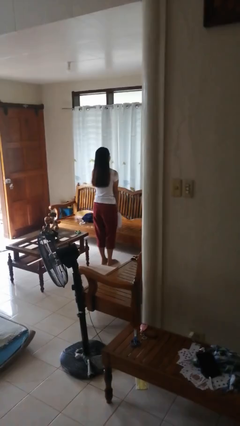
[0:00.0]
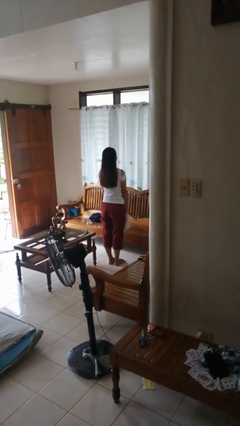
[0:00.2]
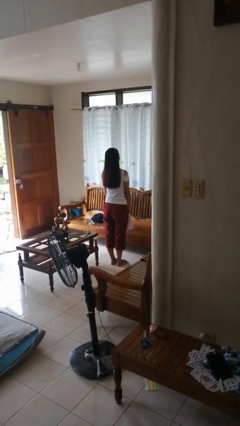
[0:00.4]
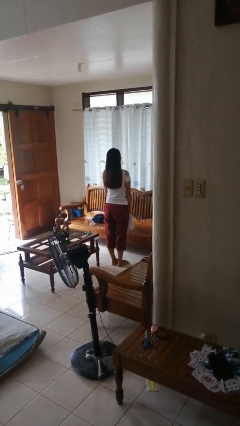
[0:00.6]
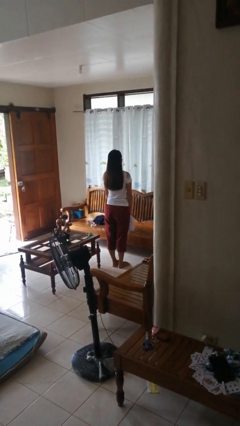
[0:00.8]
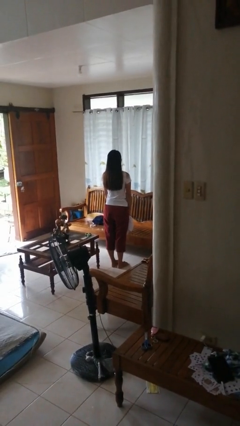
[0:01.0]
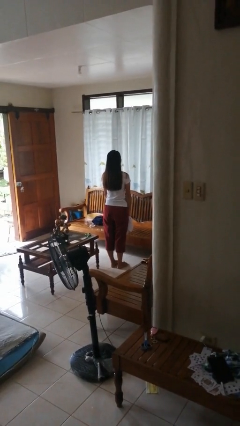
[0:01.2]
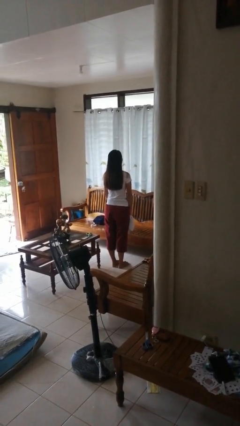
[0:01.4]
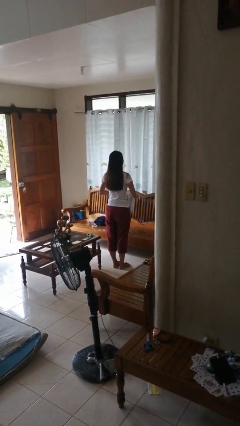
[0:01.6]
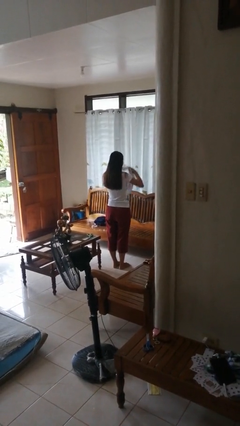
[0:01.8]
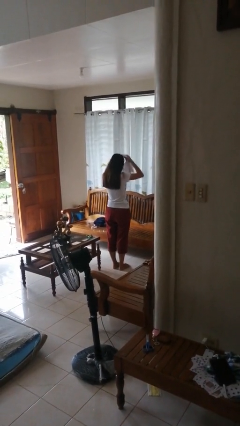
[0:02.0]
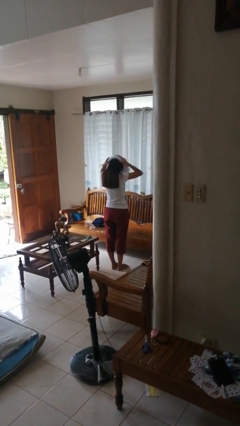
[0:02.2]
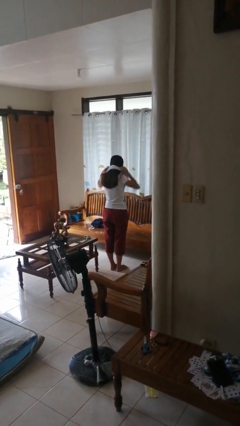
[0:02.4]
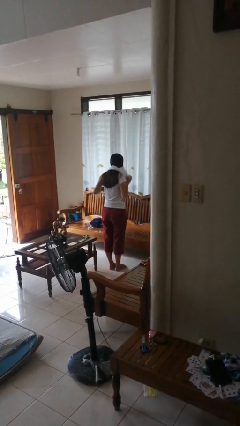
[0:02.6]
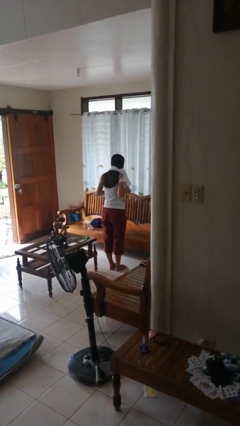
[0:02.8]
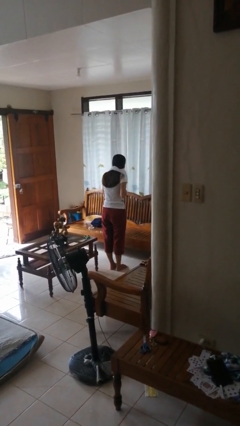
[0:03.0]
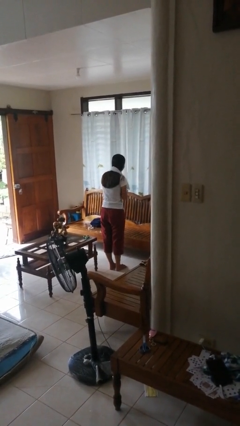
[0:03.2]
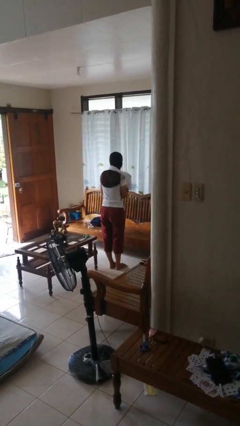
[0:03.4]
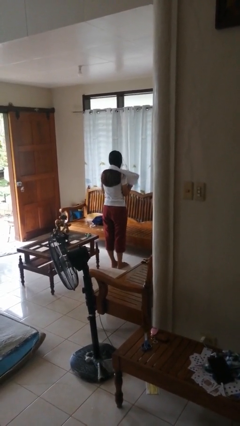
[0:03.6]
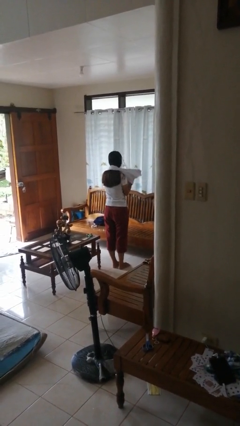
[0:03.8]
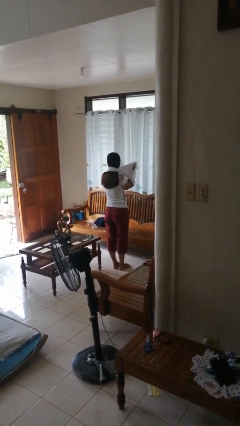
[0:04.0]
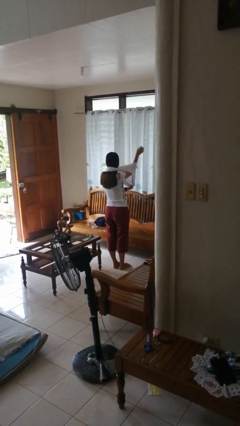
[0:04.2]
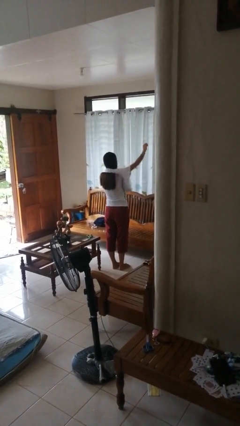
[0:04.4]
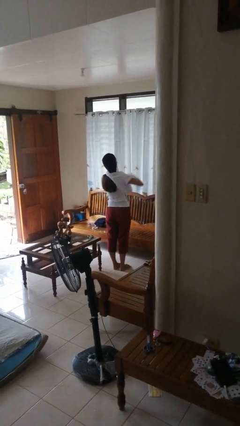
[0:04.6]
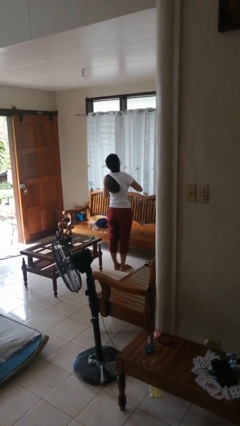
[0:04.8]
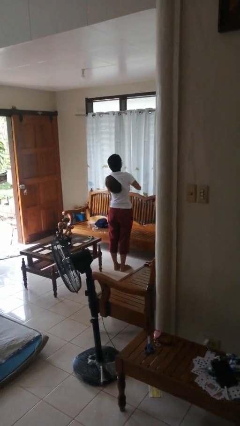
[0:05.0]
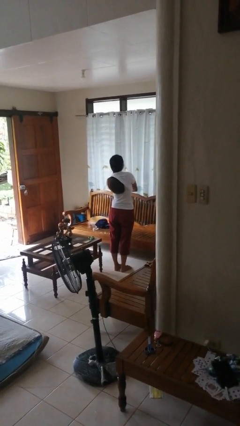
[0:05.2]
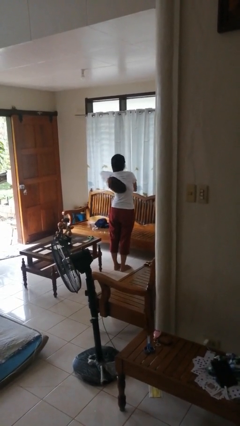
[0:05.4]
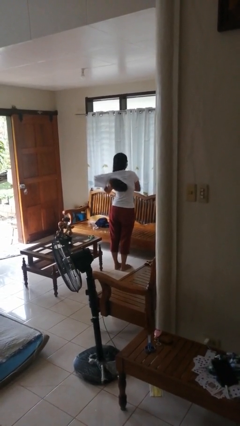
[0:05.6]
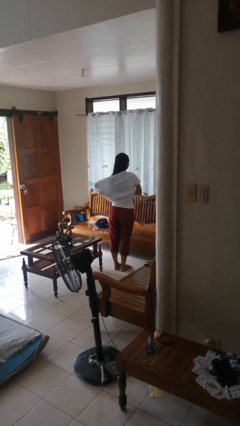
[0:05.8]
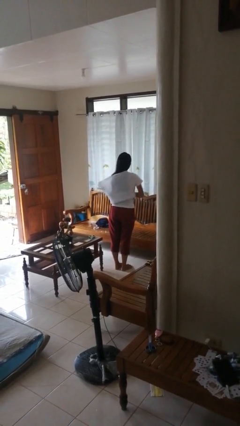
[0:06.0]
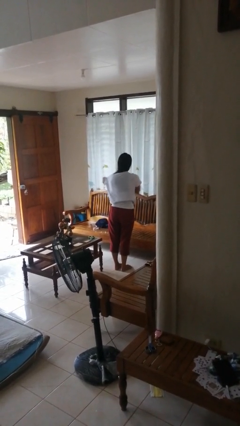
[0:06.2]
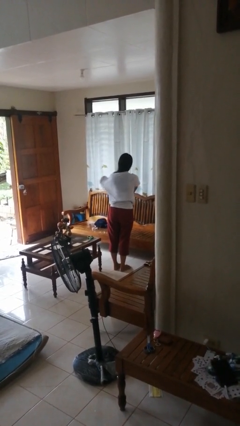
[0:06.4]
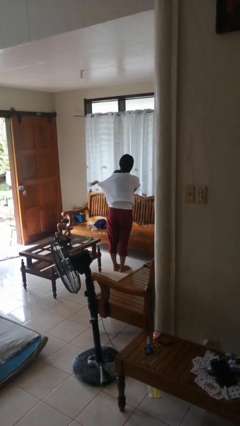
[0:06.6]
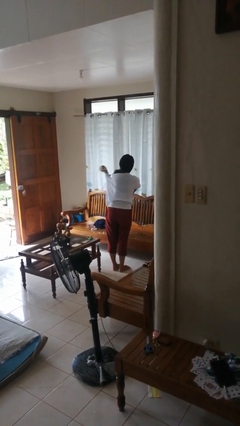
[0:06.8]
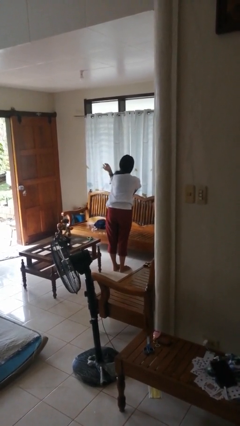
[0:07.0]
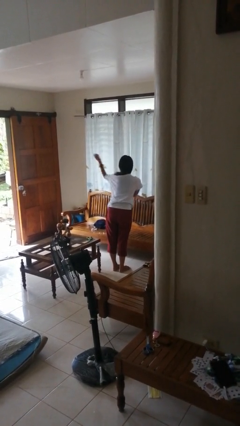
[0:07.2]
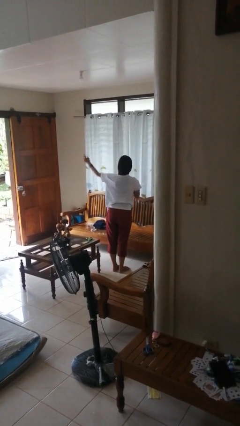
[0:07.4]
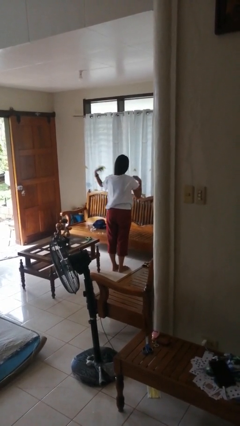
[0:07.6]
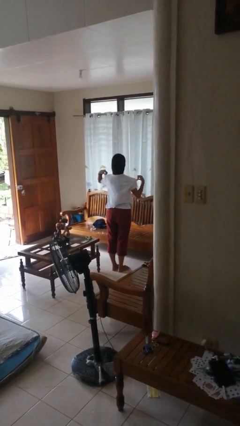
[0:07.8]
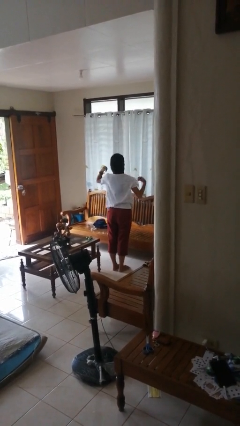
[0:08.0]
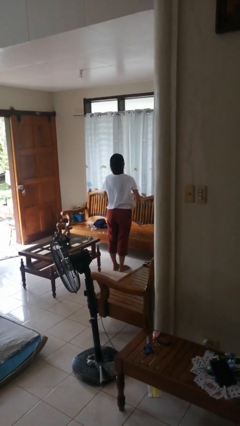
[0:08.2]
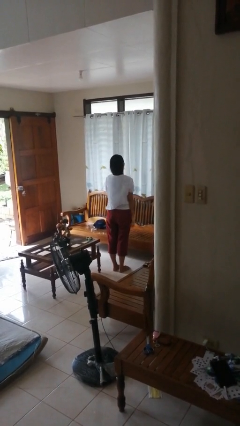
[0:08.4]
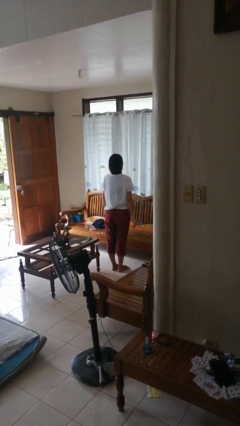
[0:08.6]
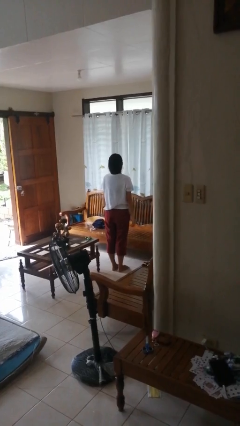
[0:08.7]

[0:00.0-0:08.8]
person puts on shirt

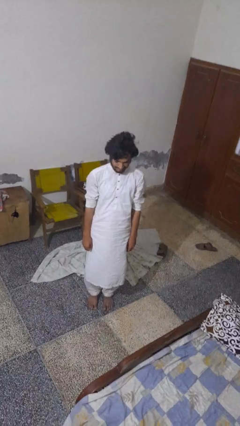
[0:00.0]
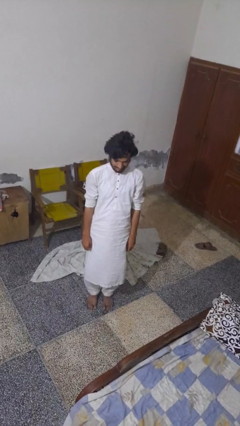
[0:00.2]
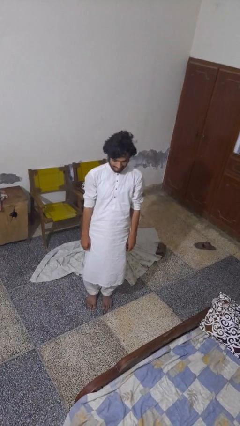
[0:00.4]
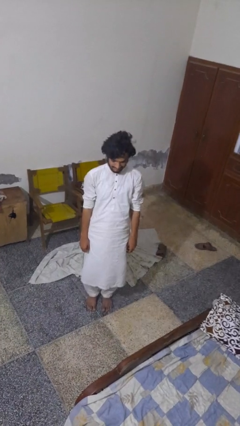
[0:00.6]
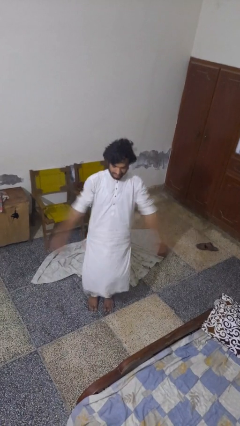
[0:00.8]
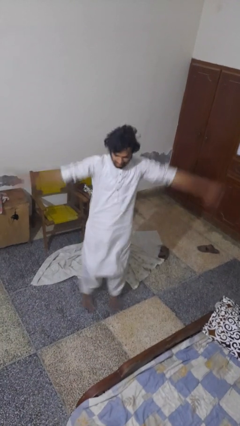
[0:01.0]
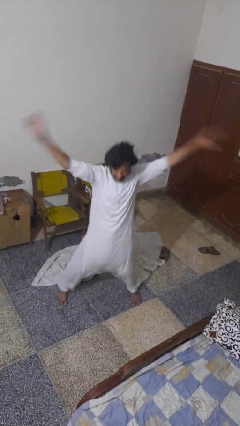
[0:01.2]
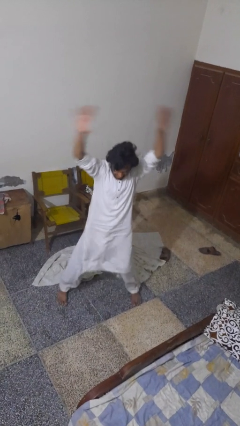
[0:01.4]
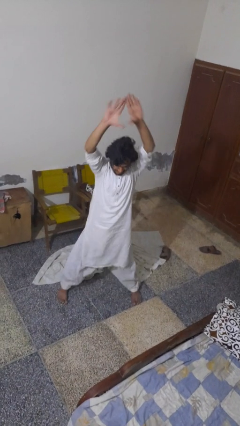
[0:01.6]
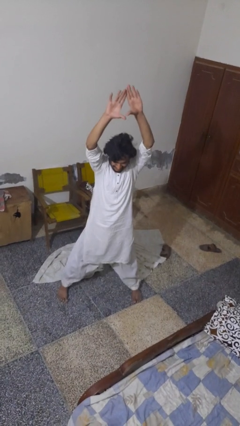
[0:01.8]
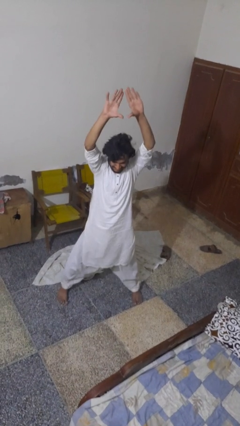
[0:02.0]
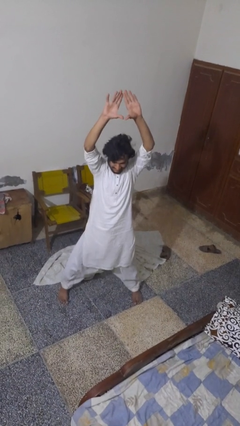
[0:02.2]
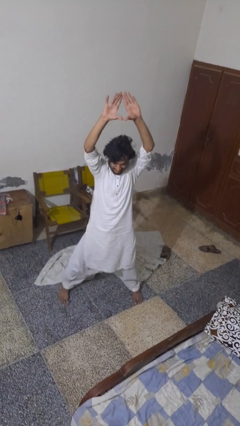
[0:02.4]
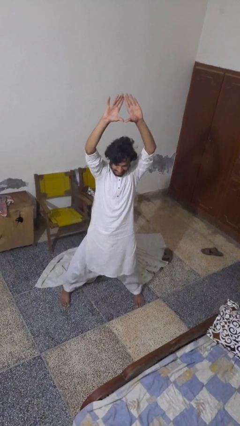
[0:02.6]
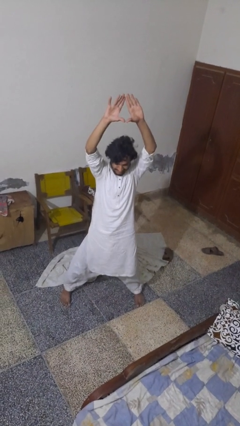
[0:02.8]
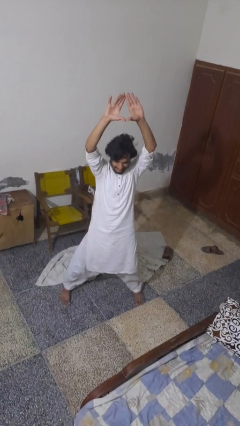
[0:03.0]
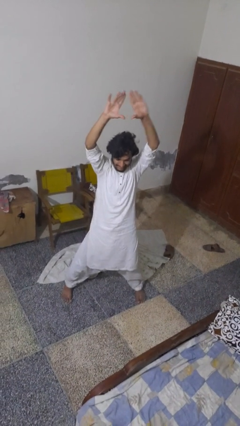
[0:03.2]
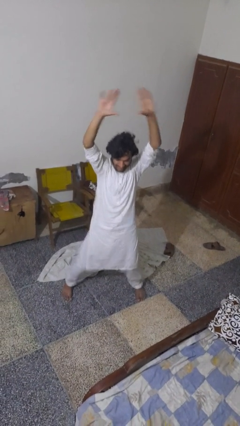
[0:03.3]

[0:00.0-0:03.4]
person exercises with jumping jacks

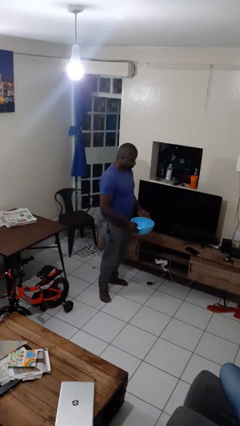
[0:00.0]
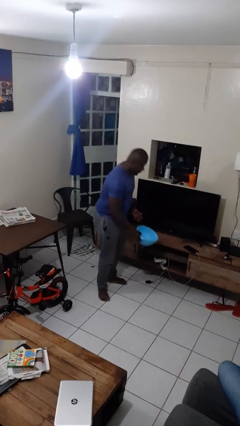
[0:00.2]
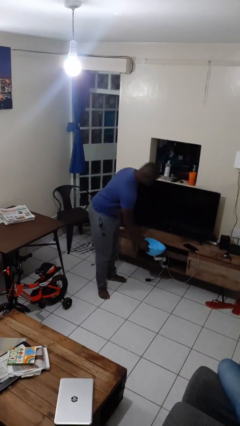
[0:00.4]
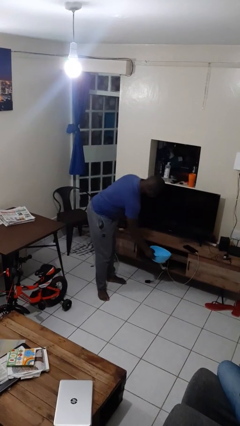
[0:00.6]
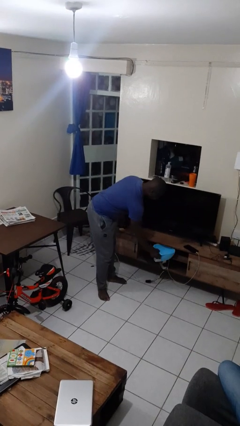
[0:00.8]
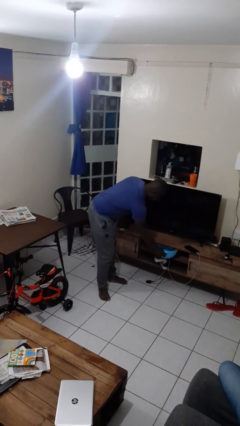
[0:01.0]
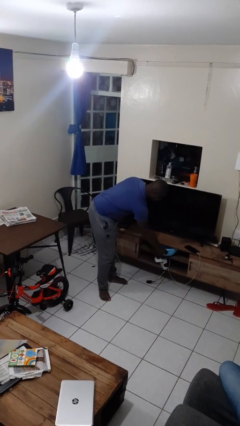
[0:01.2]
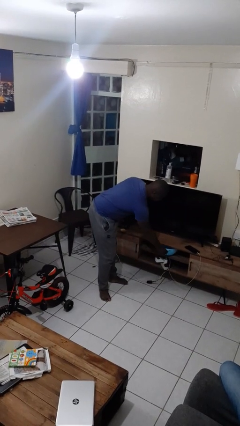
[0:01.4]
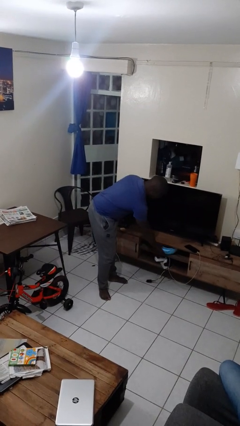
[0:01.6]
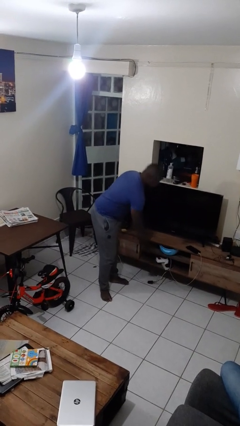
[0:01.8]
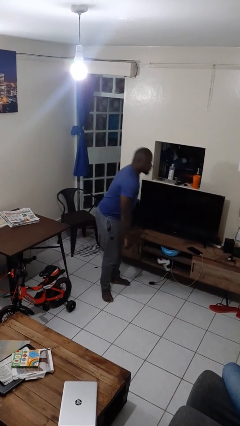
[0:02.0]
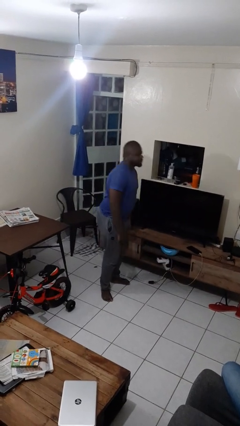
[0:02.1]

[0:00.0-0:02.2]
person puts down object into cabinet

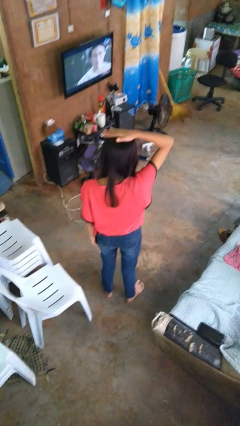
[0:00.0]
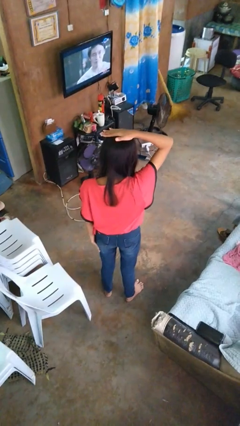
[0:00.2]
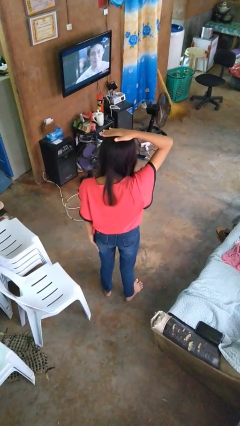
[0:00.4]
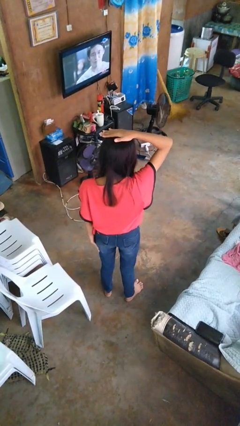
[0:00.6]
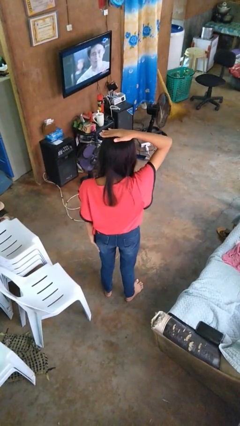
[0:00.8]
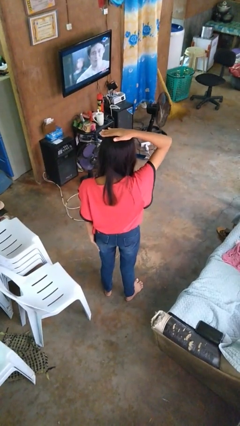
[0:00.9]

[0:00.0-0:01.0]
person pats head

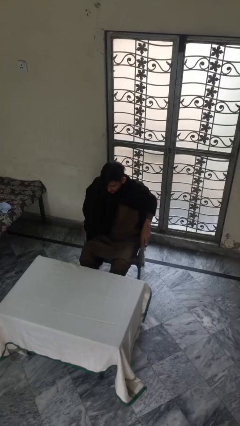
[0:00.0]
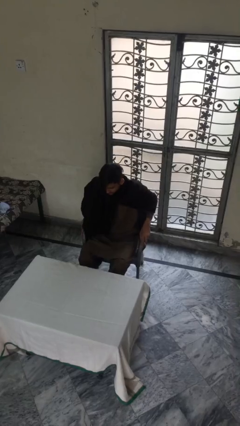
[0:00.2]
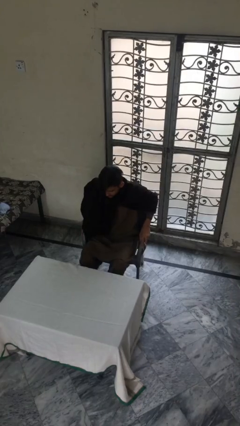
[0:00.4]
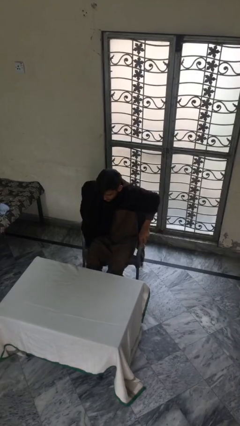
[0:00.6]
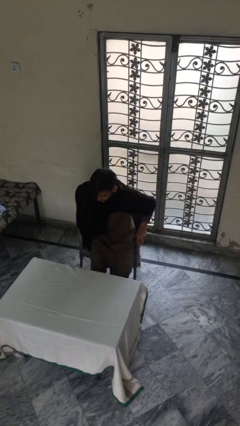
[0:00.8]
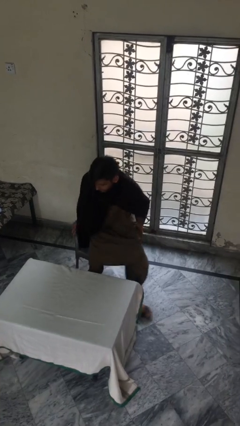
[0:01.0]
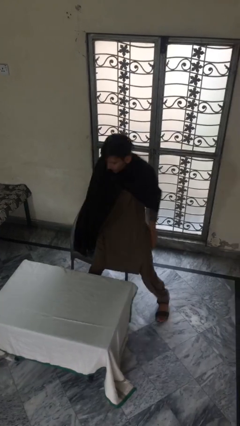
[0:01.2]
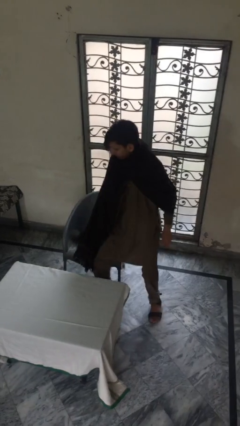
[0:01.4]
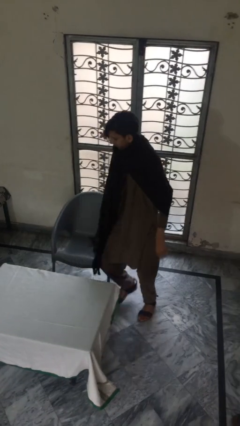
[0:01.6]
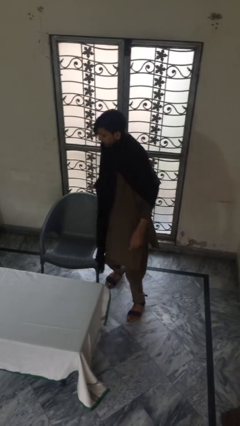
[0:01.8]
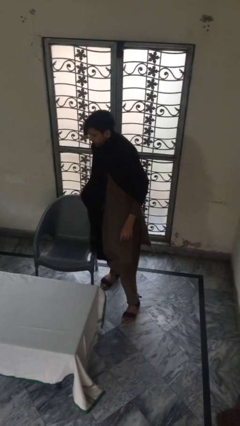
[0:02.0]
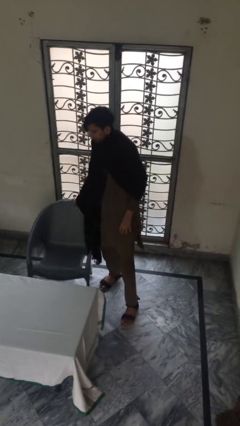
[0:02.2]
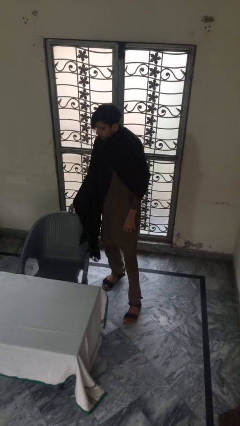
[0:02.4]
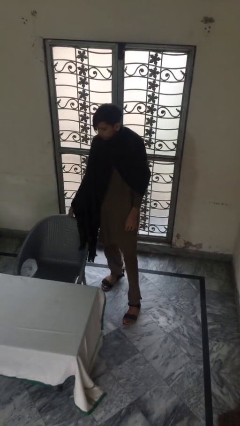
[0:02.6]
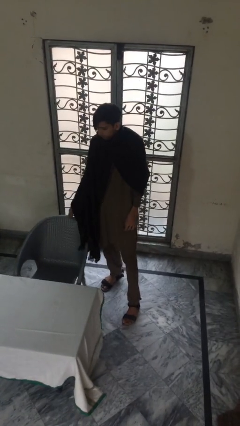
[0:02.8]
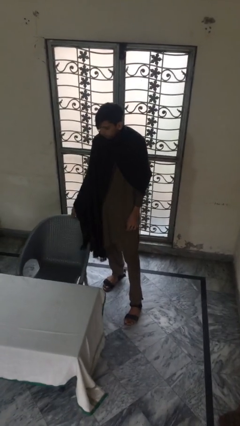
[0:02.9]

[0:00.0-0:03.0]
person stands up
